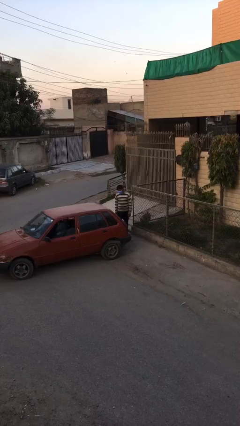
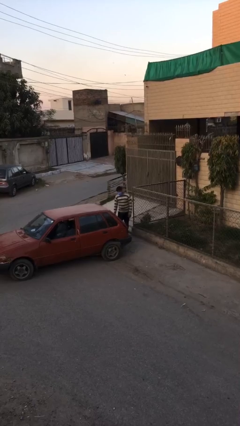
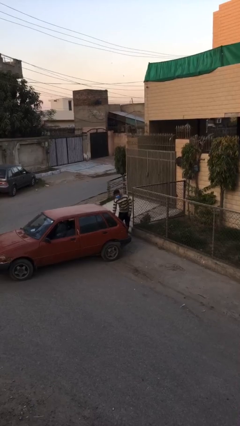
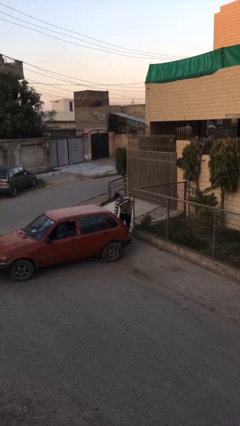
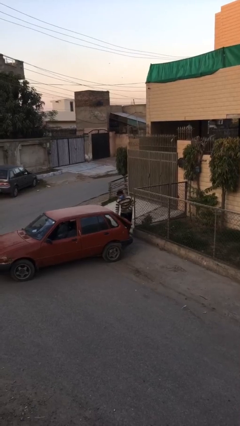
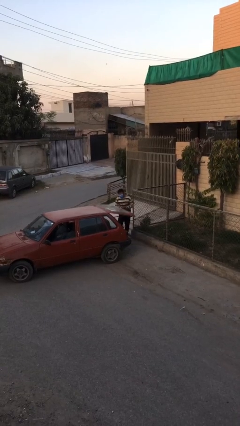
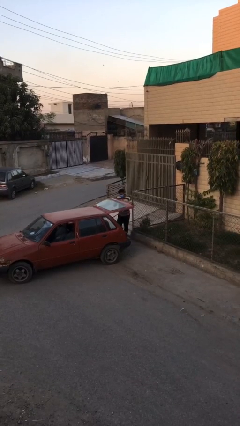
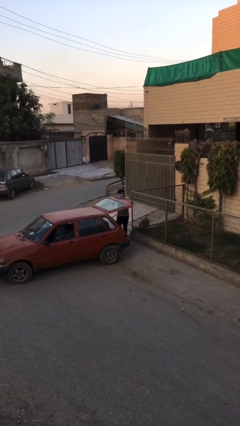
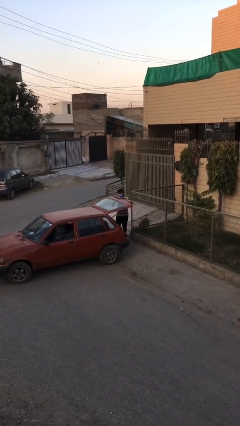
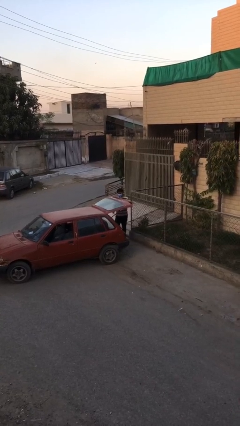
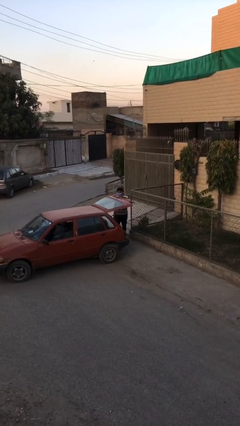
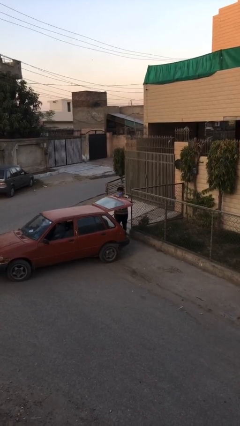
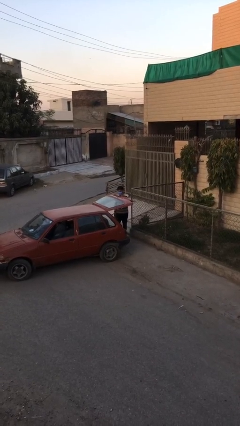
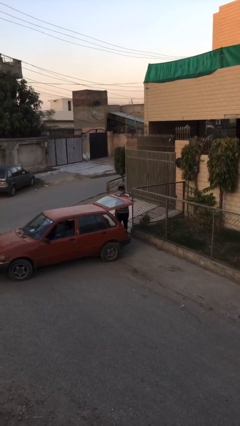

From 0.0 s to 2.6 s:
person opens car trunk

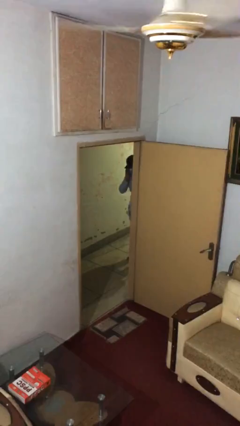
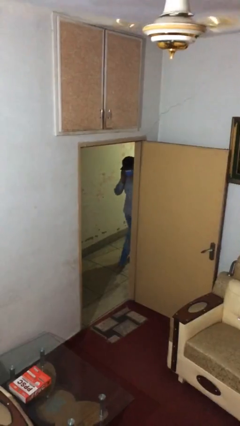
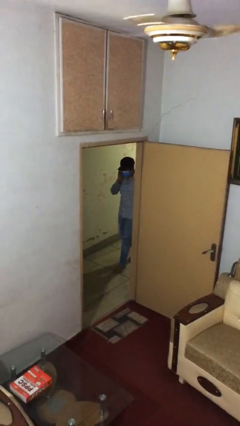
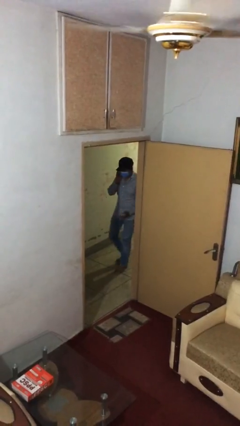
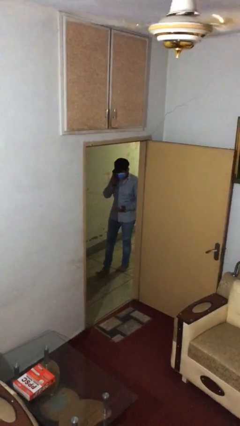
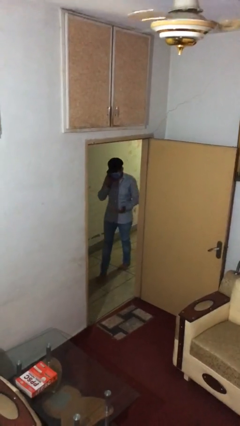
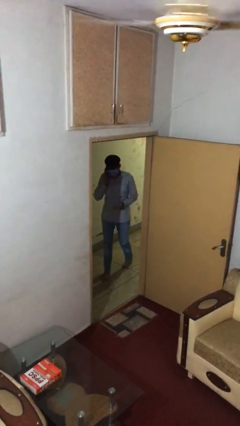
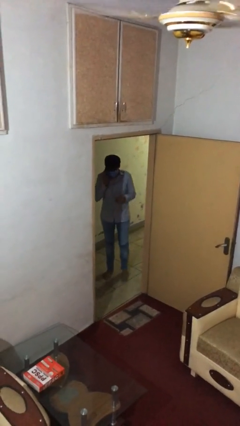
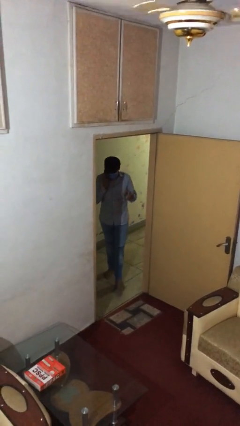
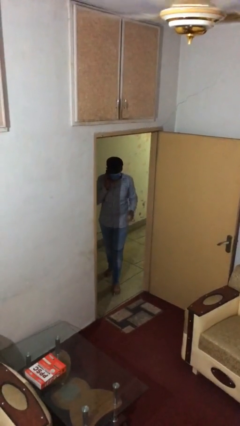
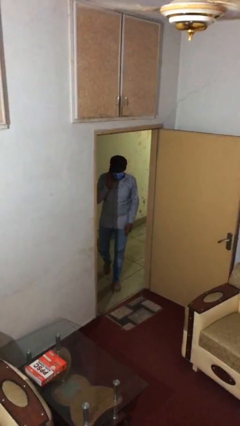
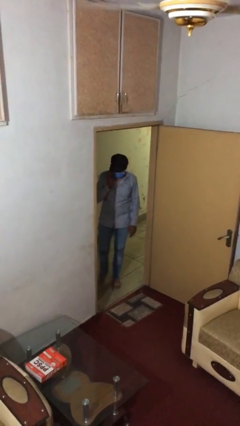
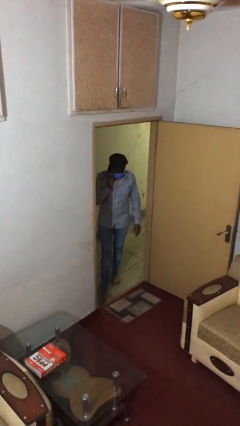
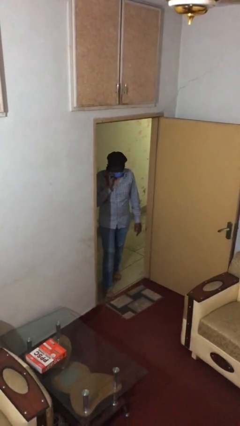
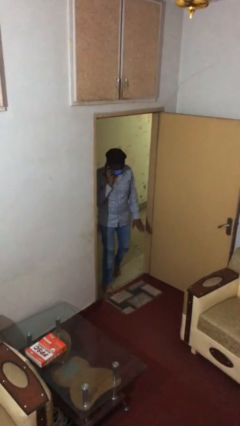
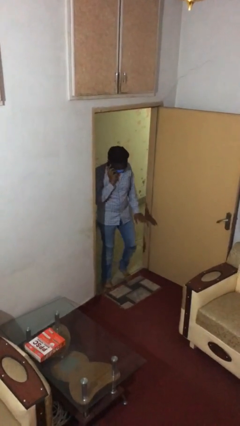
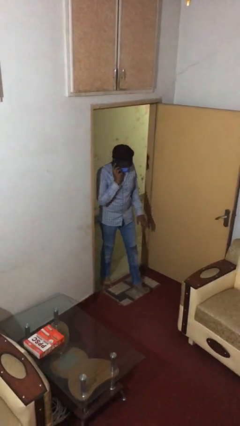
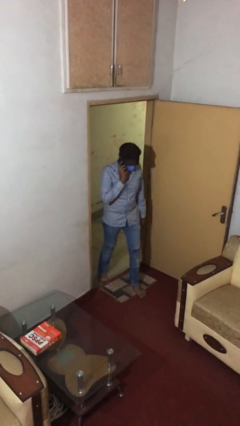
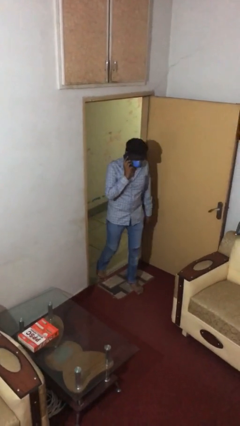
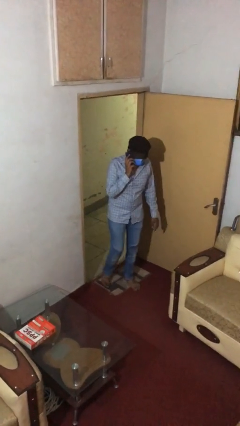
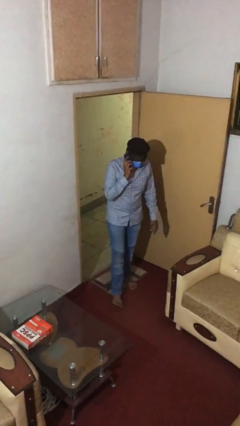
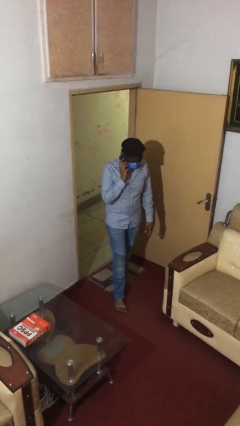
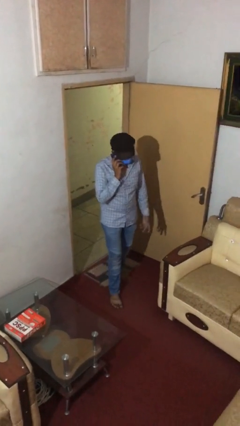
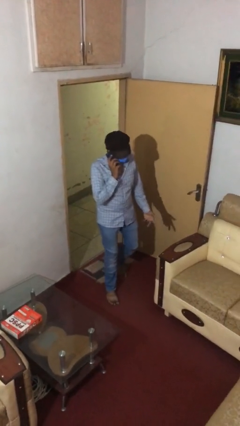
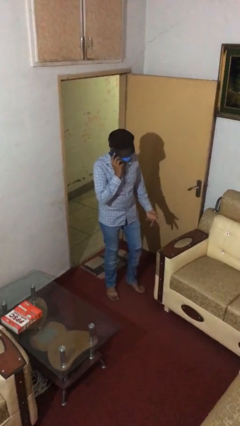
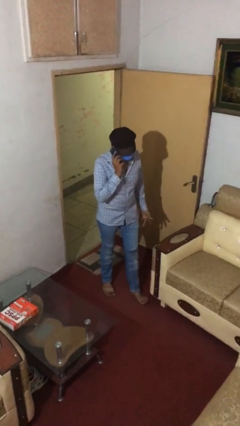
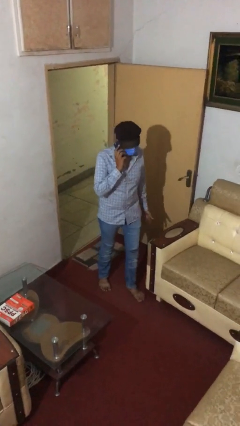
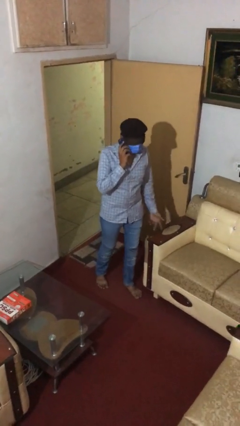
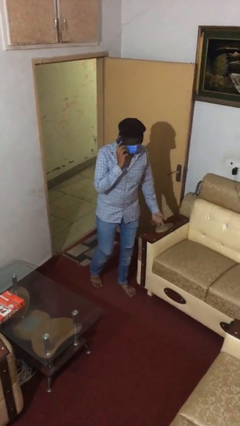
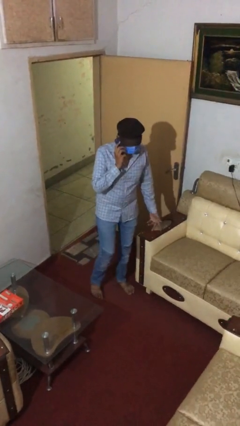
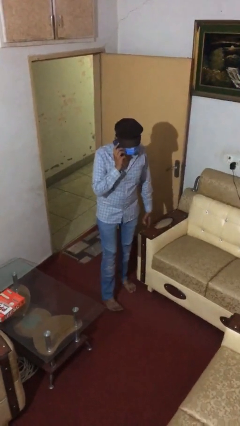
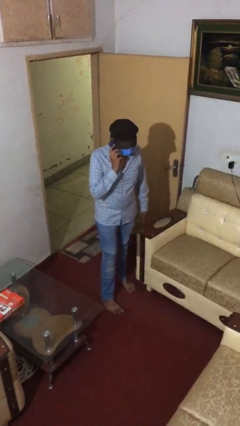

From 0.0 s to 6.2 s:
person enters scene through structure

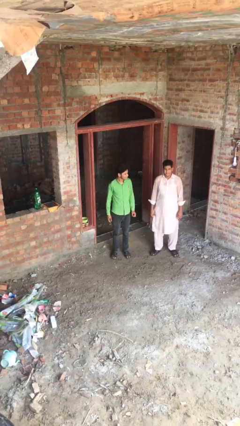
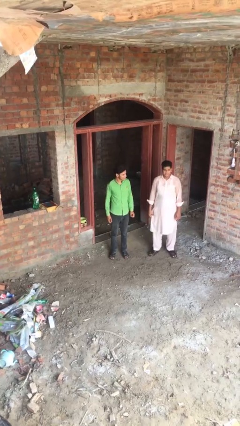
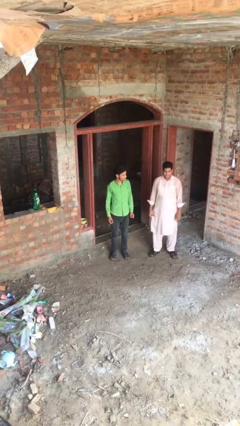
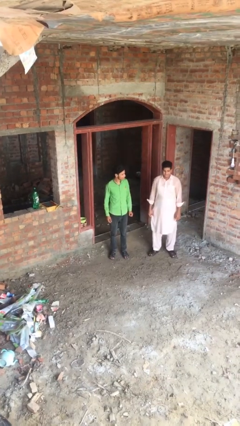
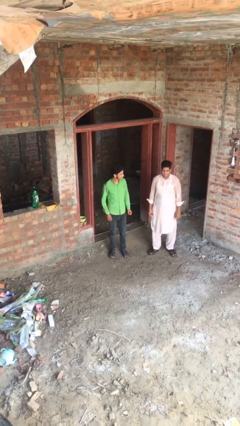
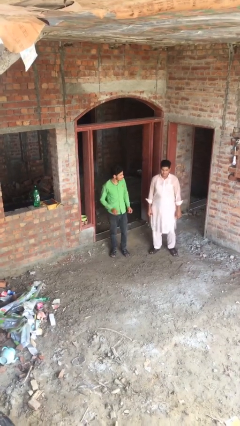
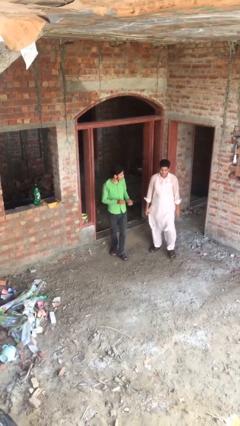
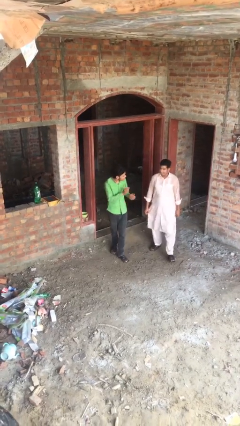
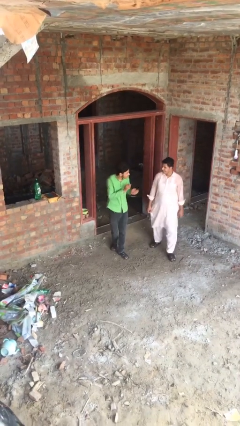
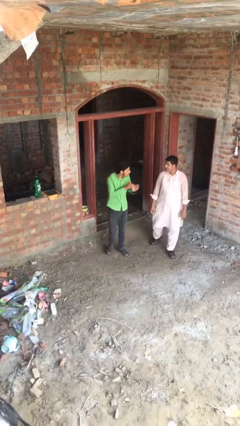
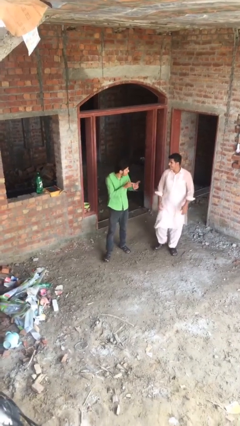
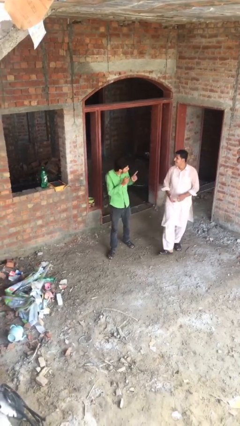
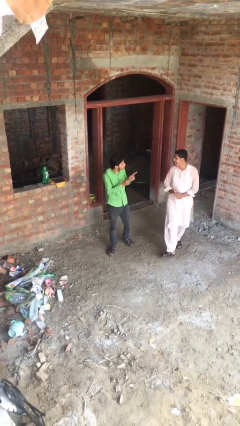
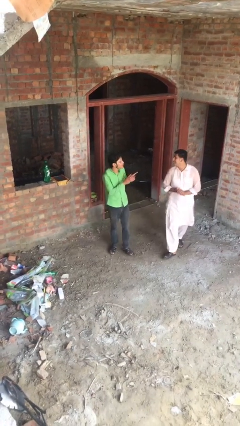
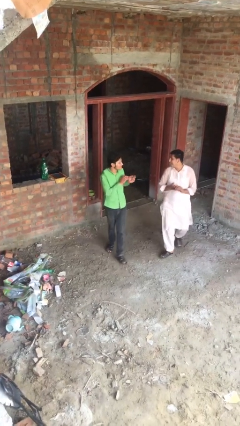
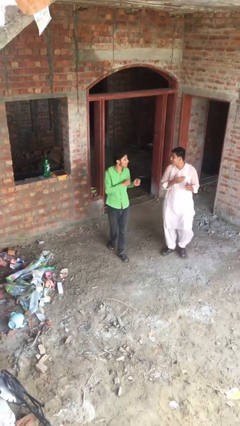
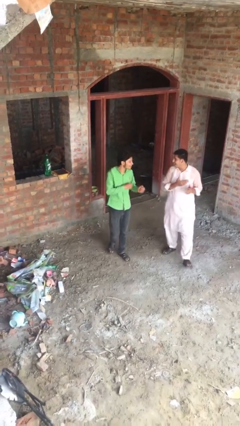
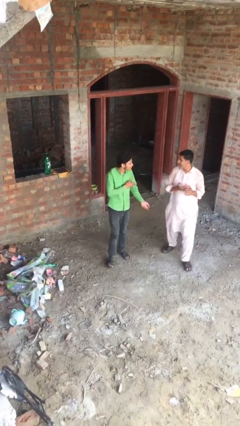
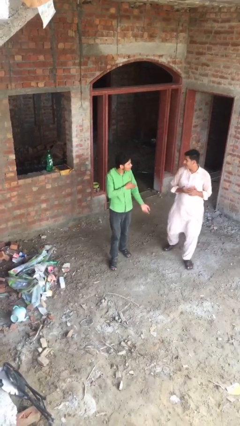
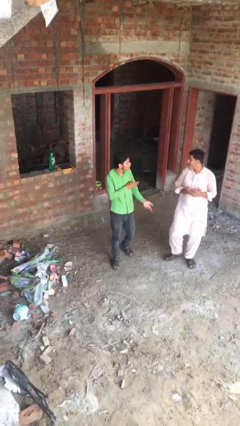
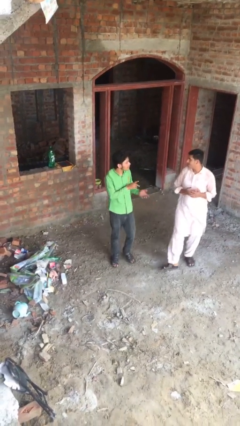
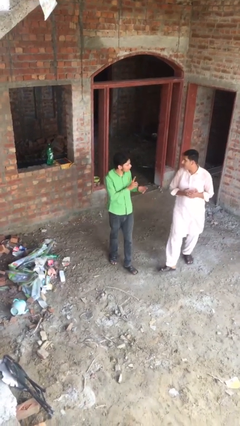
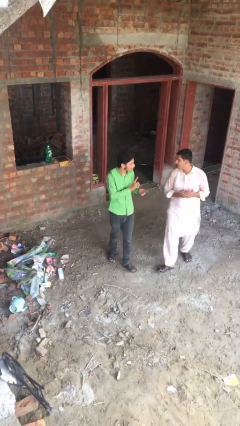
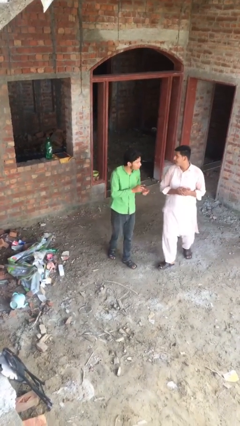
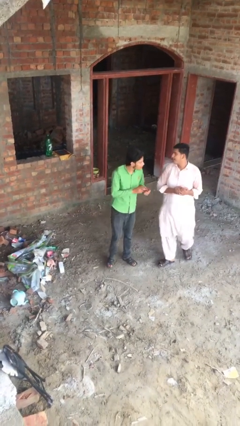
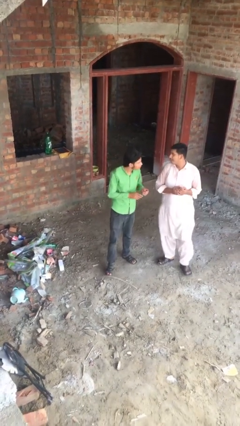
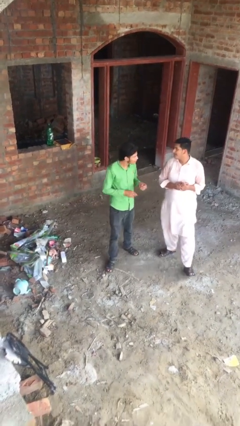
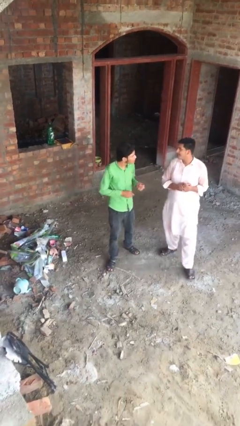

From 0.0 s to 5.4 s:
person talks to person

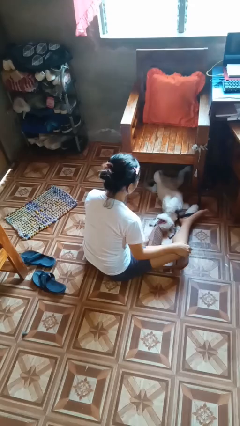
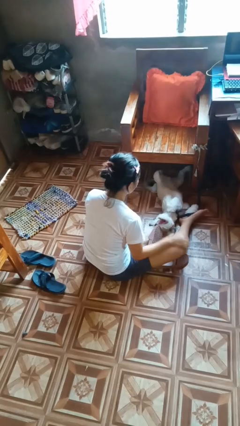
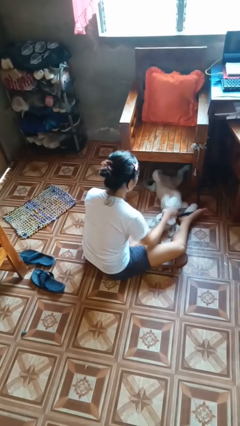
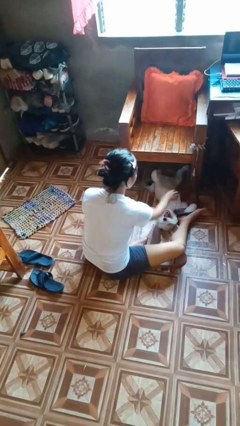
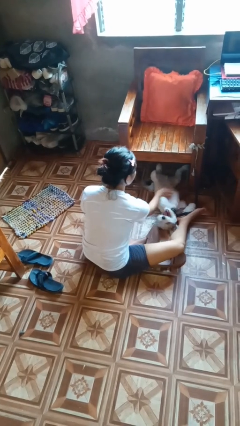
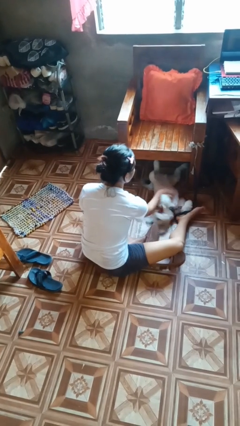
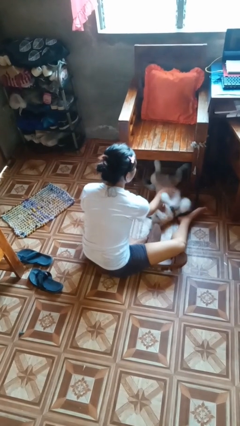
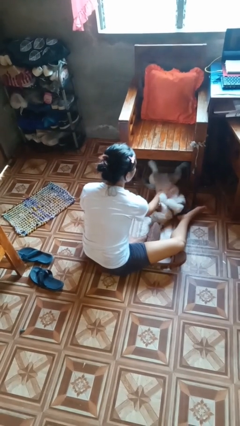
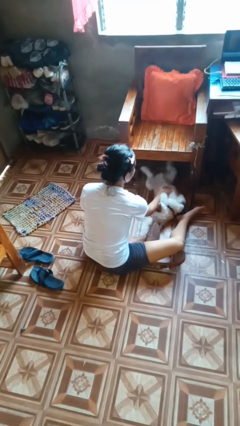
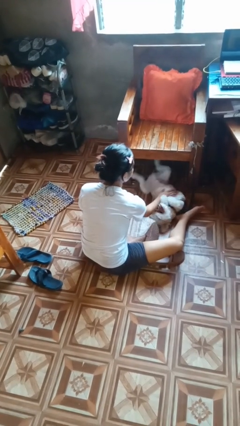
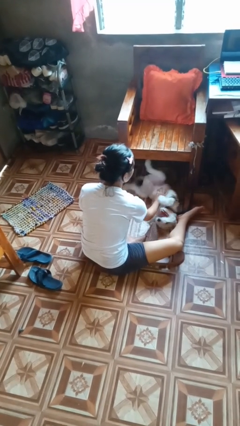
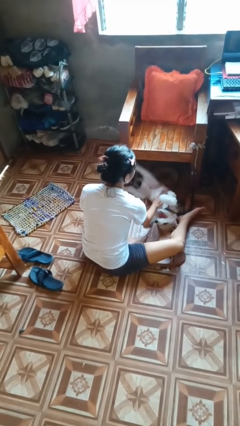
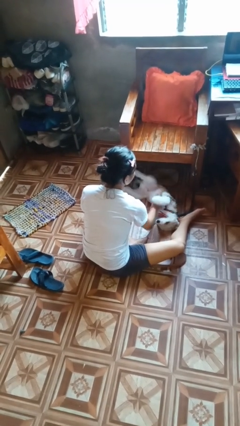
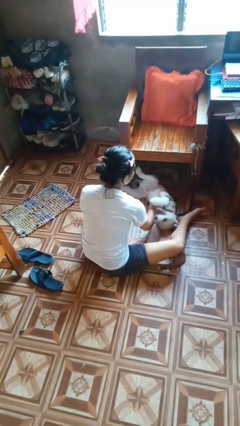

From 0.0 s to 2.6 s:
person pets dog

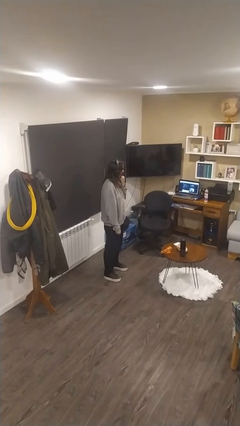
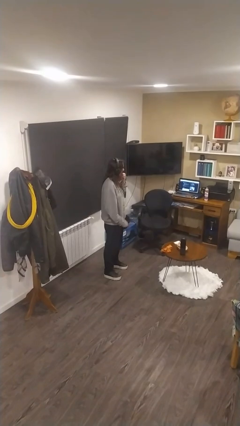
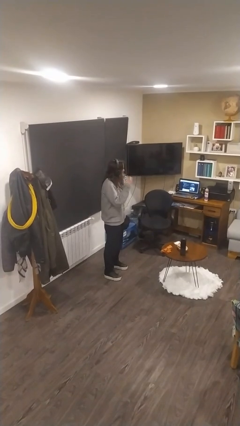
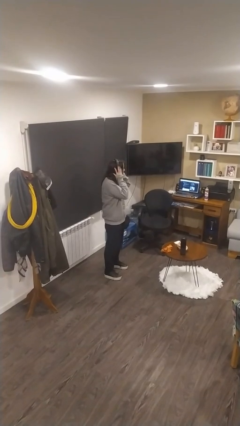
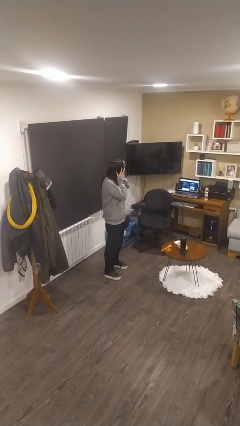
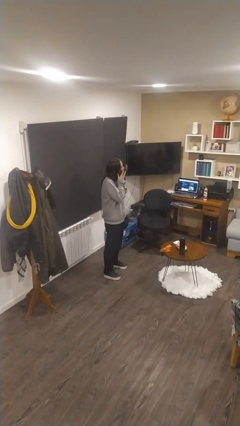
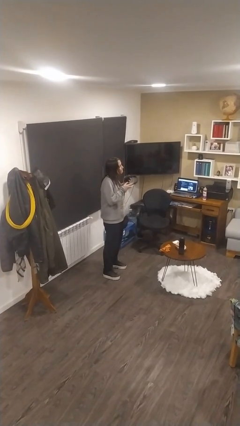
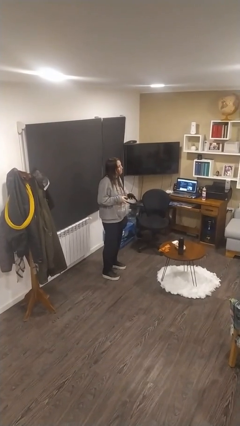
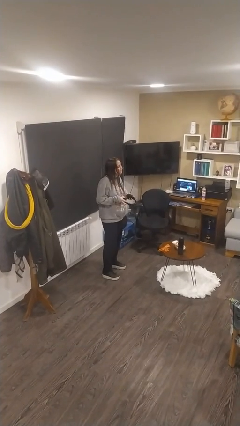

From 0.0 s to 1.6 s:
person takes off headphones
